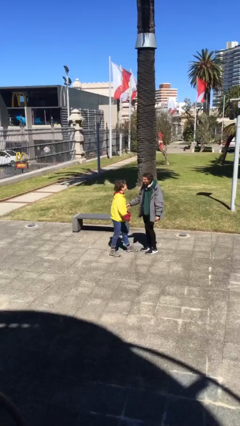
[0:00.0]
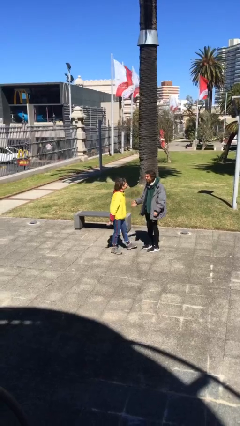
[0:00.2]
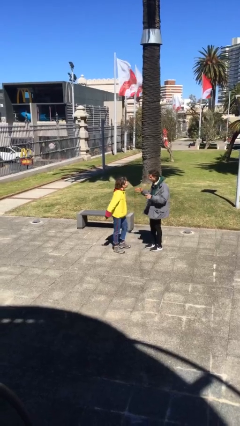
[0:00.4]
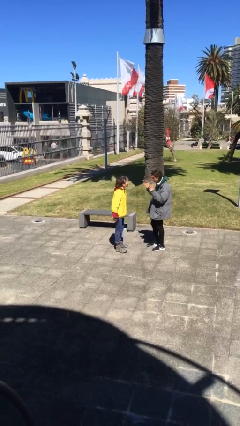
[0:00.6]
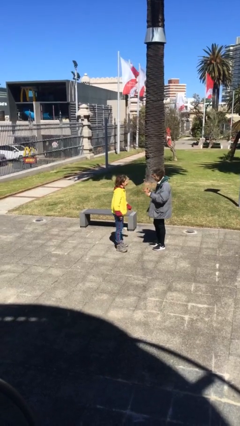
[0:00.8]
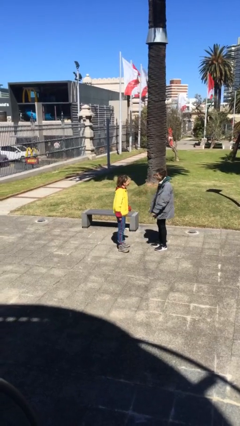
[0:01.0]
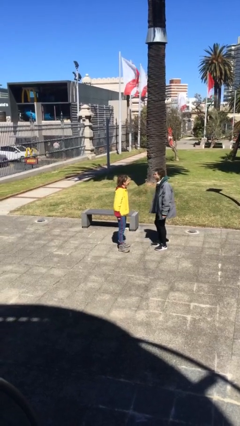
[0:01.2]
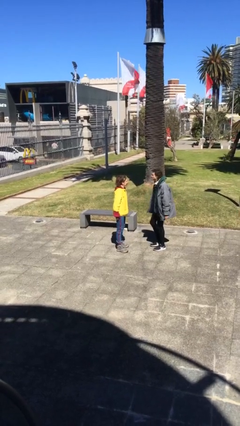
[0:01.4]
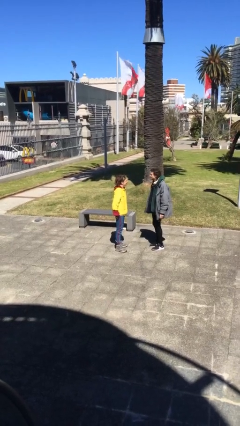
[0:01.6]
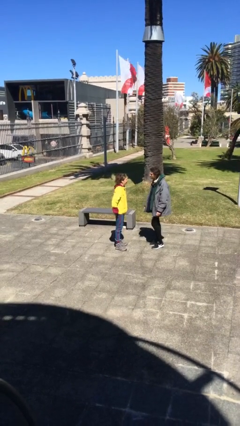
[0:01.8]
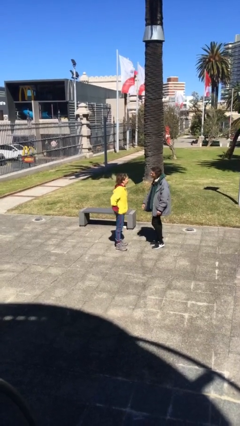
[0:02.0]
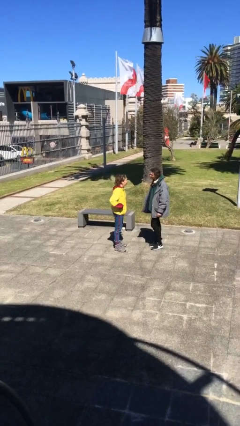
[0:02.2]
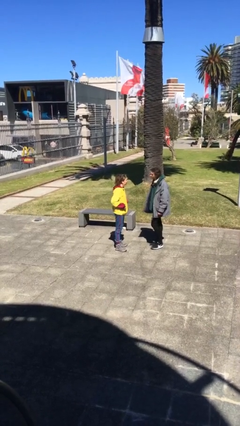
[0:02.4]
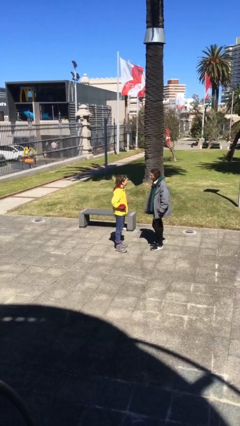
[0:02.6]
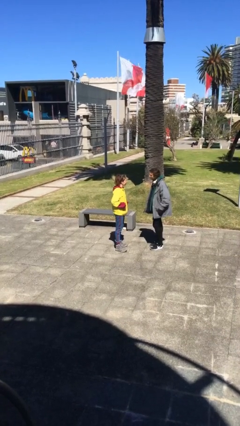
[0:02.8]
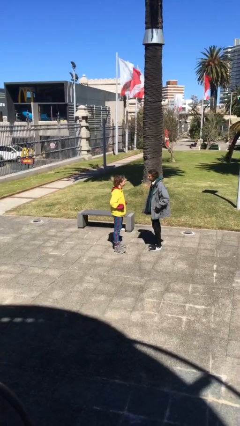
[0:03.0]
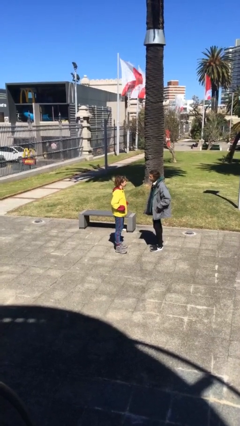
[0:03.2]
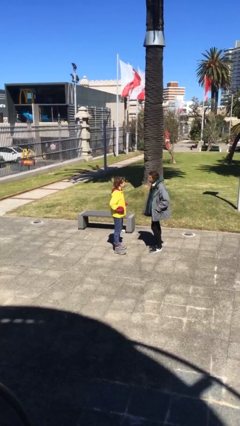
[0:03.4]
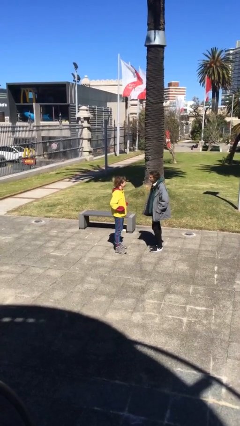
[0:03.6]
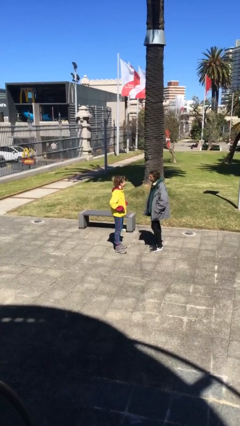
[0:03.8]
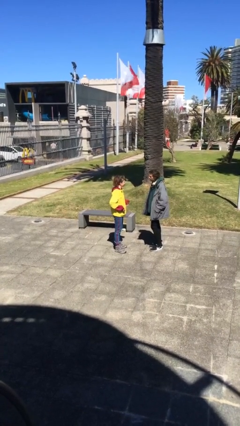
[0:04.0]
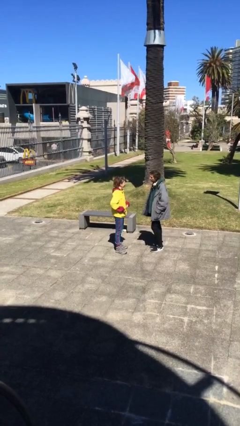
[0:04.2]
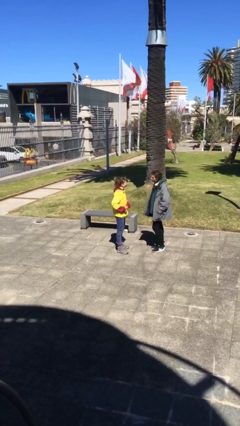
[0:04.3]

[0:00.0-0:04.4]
person talks to person

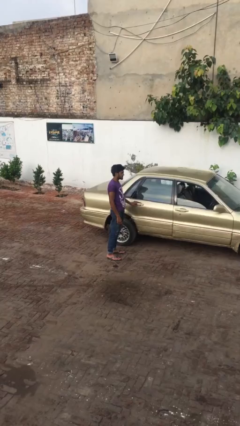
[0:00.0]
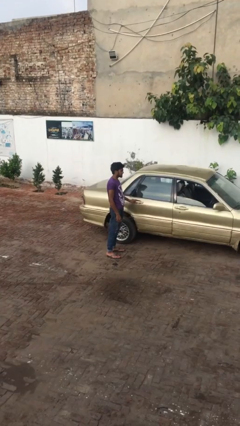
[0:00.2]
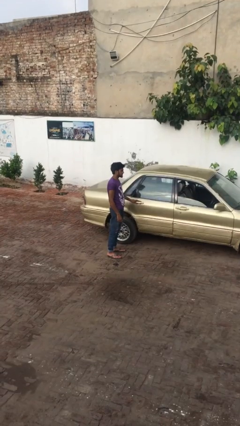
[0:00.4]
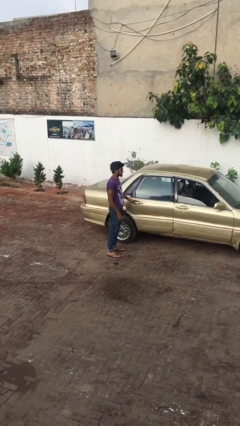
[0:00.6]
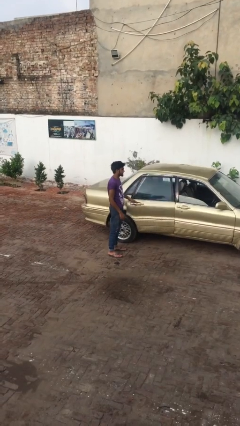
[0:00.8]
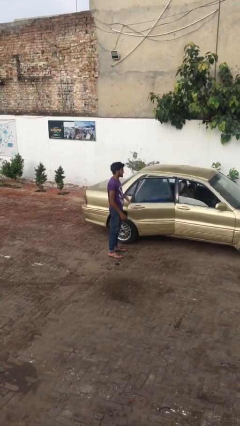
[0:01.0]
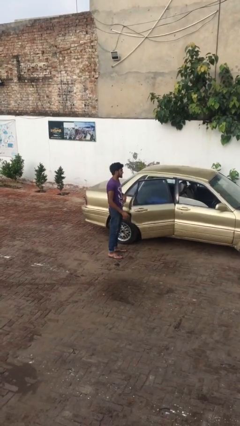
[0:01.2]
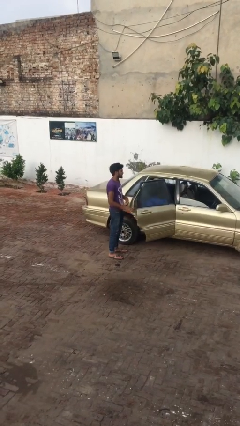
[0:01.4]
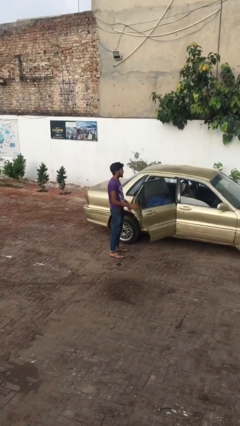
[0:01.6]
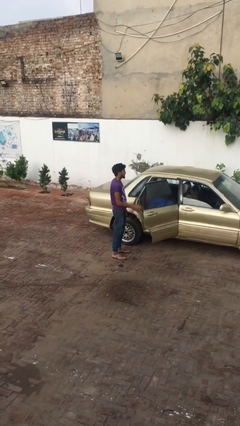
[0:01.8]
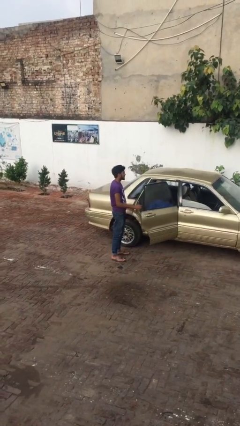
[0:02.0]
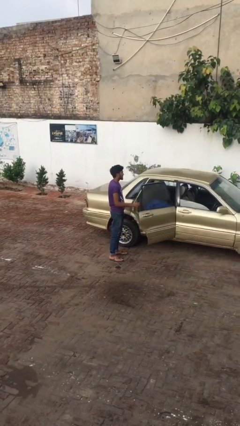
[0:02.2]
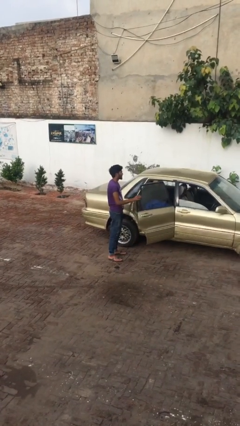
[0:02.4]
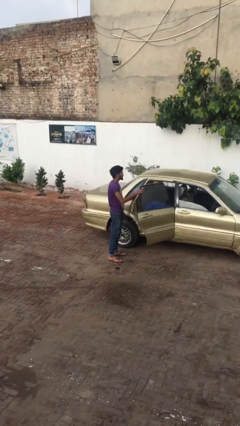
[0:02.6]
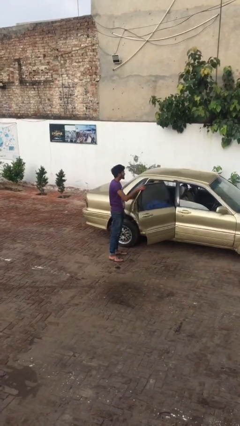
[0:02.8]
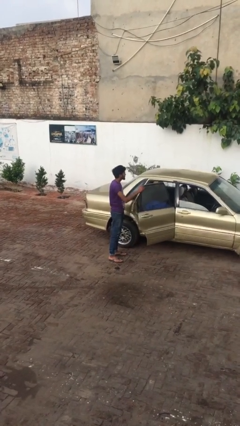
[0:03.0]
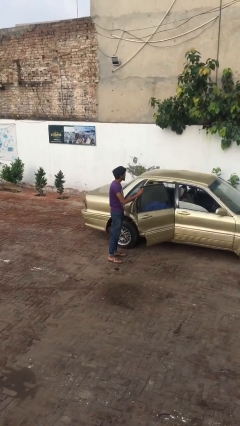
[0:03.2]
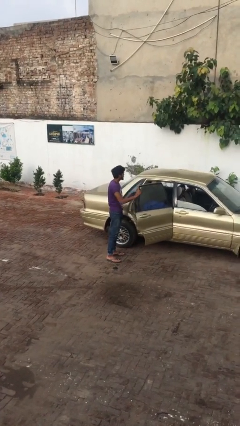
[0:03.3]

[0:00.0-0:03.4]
person opens car door

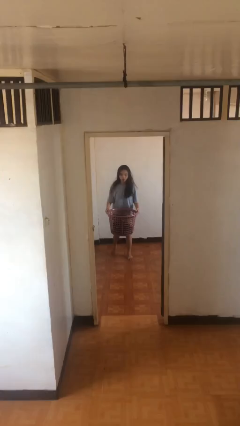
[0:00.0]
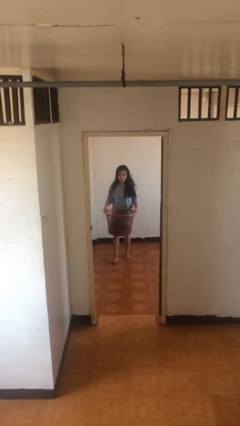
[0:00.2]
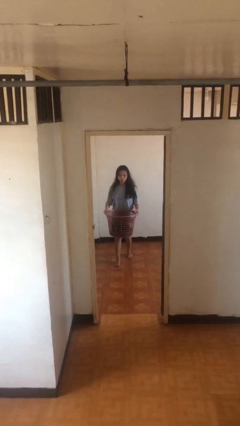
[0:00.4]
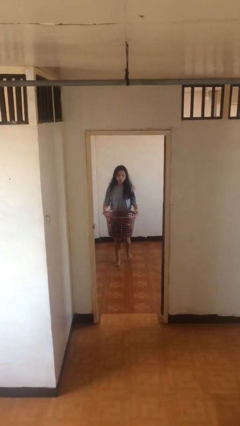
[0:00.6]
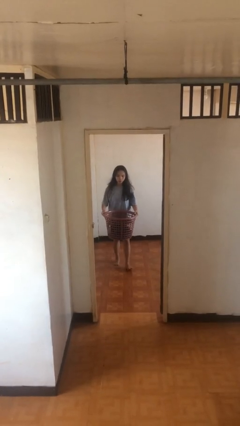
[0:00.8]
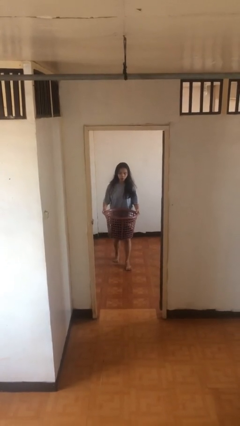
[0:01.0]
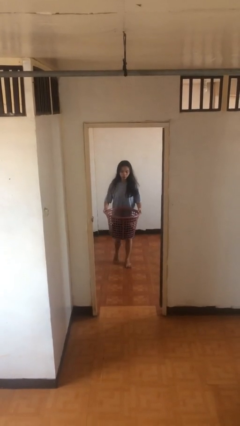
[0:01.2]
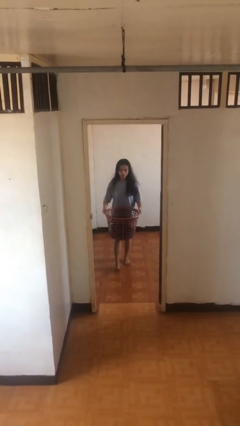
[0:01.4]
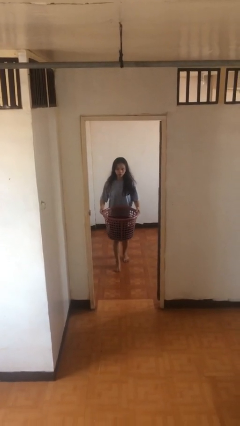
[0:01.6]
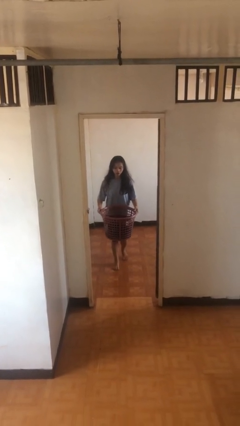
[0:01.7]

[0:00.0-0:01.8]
person carries heavy object

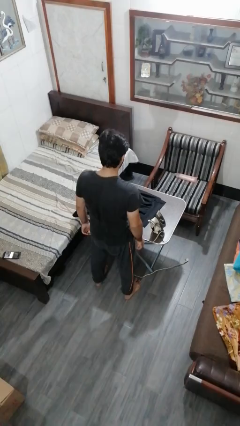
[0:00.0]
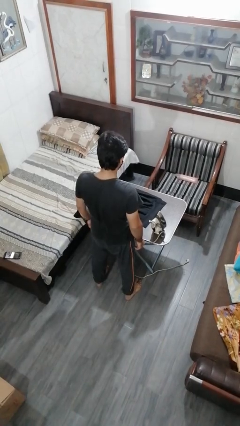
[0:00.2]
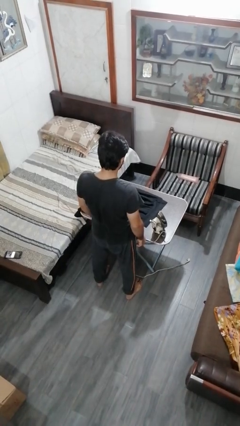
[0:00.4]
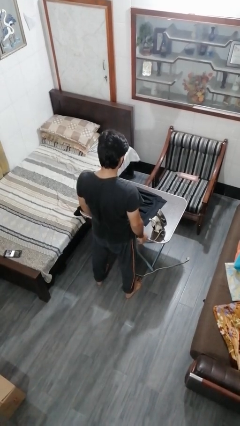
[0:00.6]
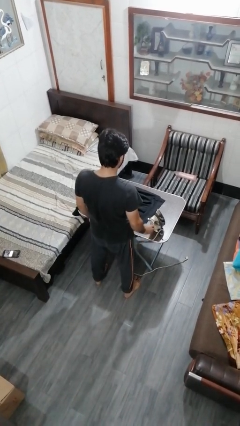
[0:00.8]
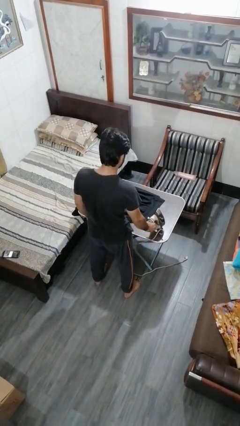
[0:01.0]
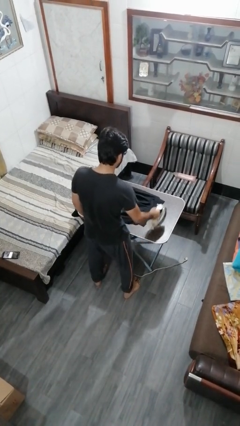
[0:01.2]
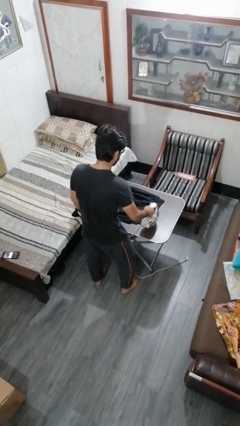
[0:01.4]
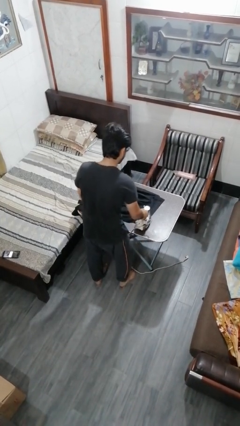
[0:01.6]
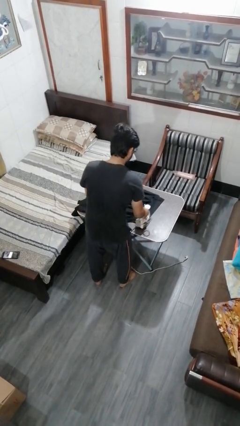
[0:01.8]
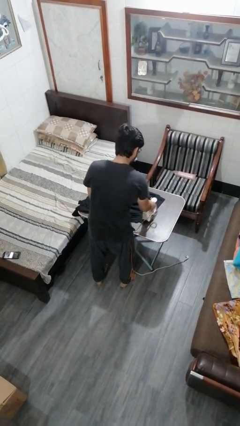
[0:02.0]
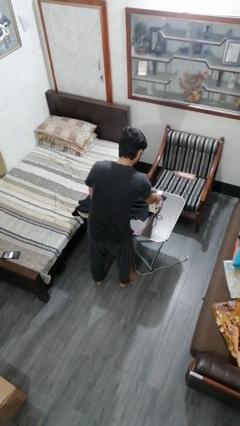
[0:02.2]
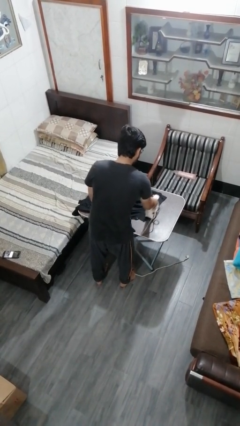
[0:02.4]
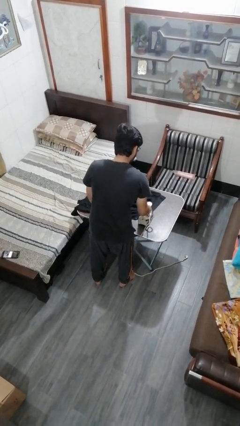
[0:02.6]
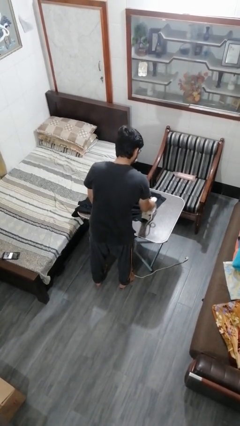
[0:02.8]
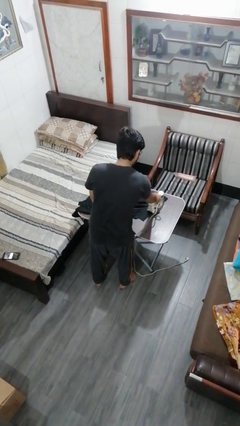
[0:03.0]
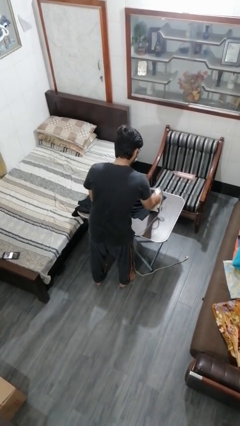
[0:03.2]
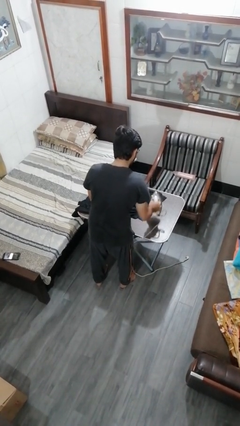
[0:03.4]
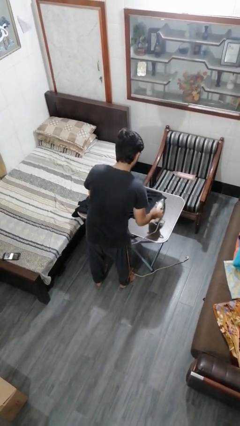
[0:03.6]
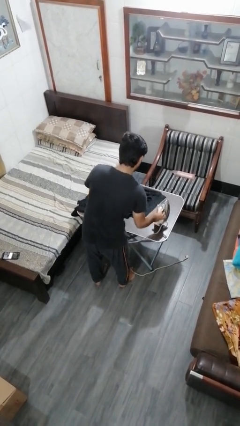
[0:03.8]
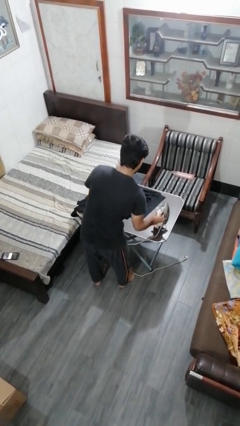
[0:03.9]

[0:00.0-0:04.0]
person irons clothes

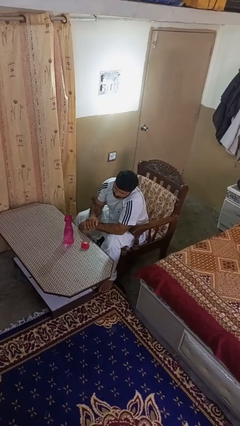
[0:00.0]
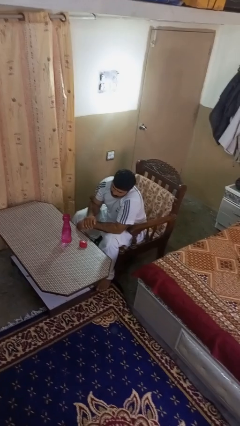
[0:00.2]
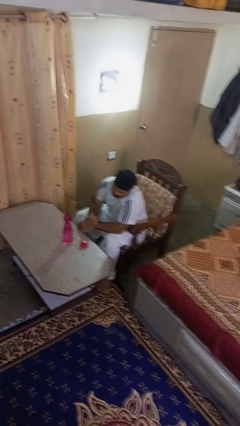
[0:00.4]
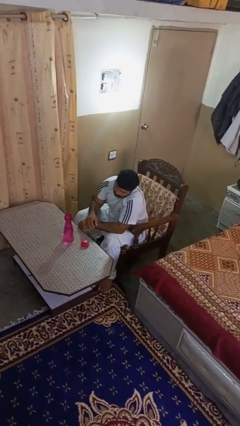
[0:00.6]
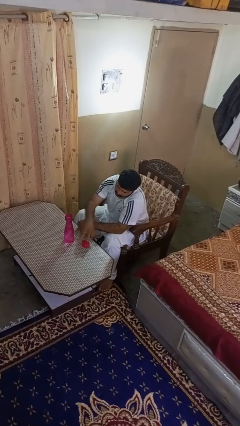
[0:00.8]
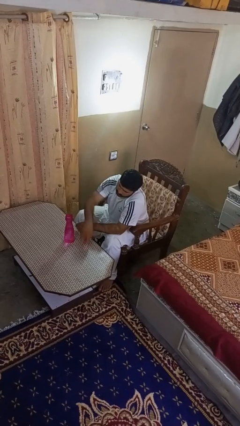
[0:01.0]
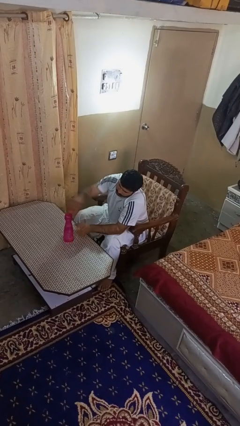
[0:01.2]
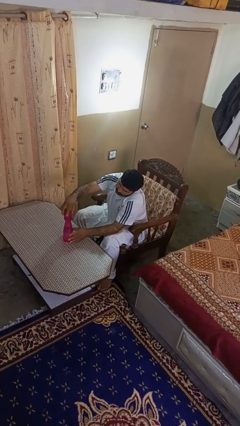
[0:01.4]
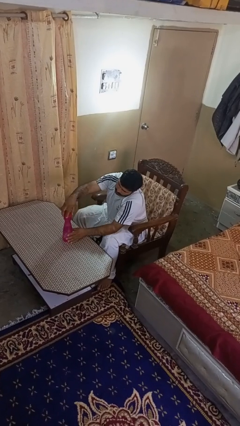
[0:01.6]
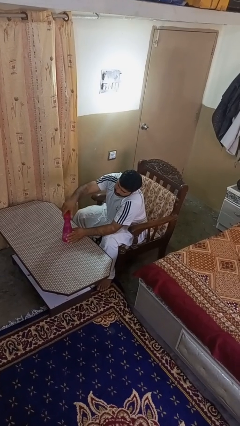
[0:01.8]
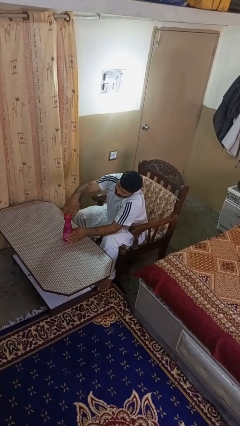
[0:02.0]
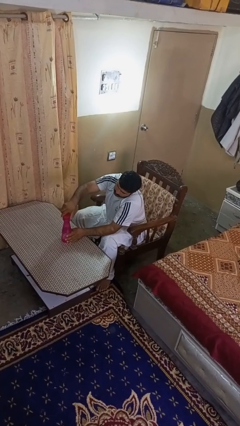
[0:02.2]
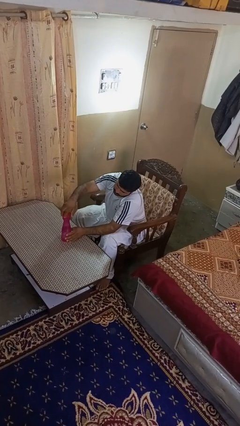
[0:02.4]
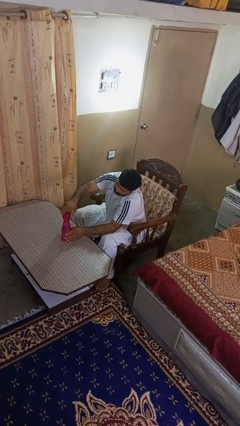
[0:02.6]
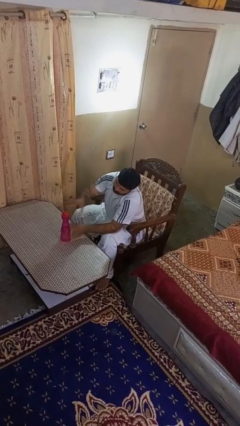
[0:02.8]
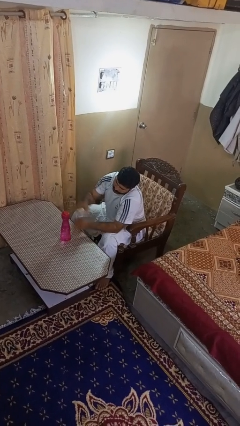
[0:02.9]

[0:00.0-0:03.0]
person screws lid to bottle

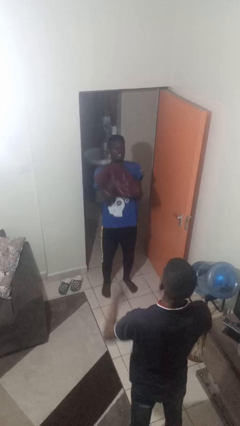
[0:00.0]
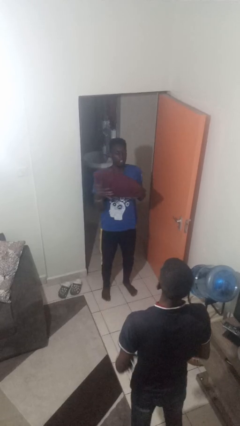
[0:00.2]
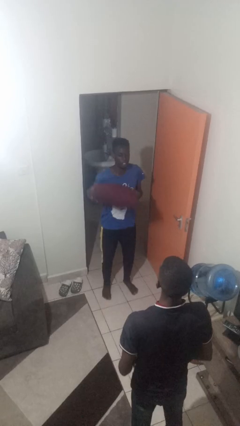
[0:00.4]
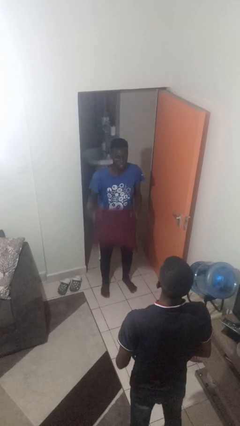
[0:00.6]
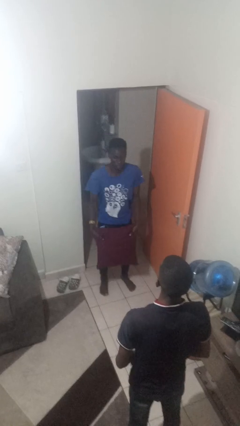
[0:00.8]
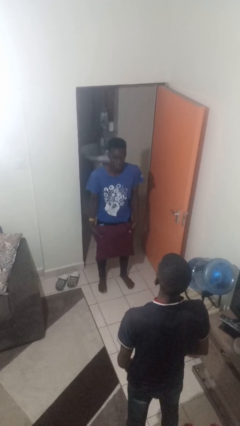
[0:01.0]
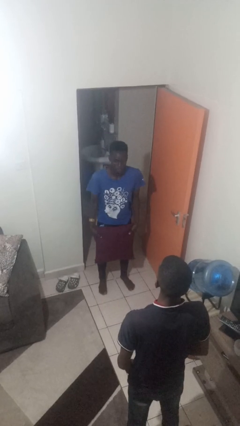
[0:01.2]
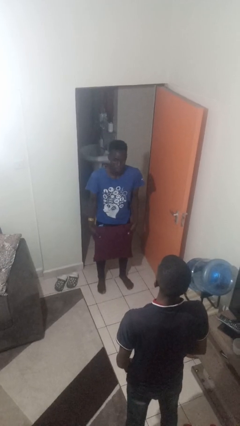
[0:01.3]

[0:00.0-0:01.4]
person catches object from person
